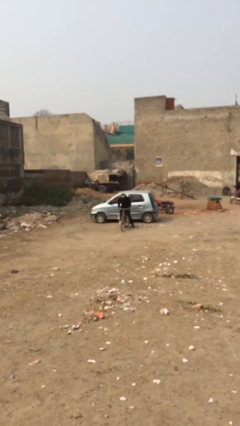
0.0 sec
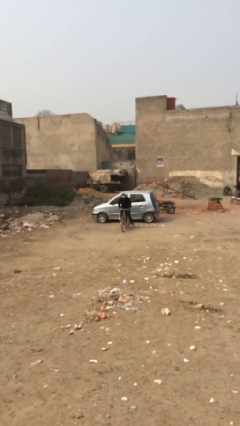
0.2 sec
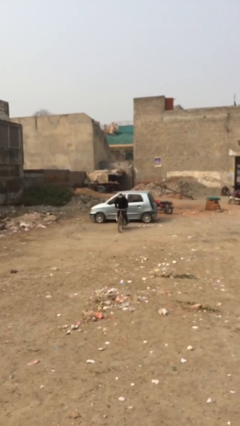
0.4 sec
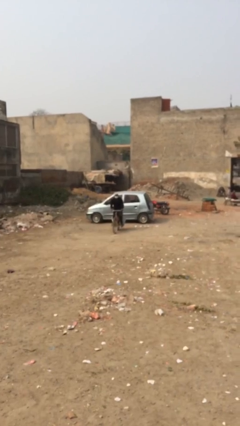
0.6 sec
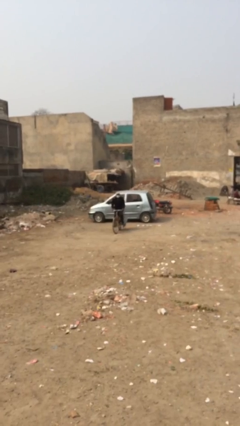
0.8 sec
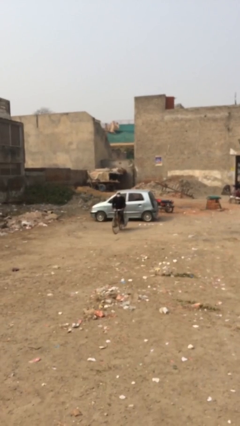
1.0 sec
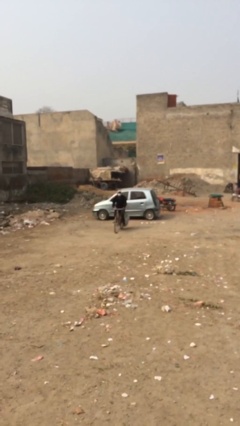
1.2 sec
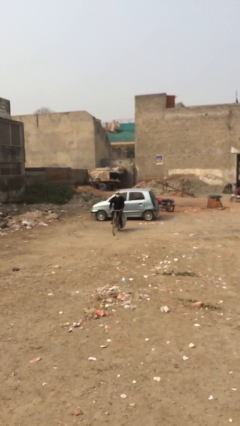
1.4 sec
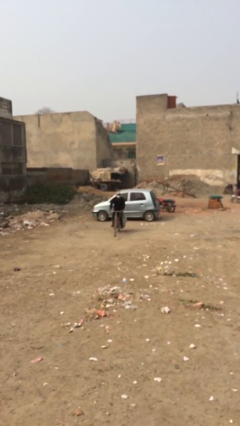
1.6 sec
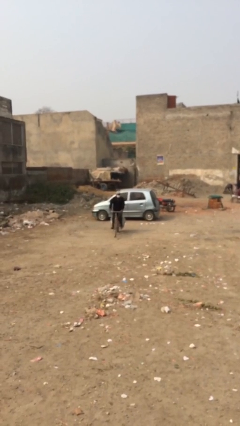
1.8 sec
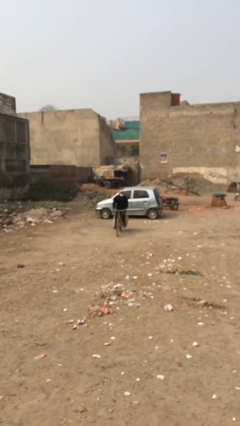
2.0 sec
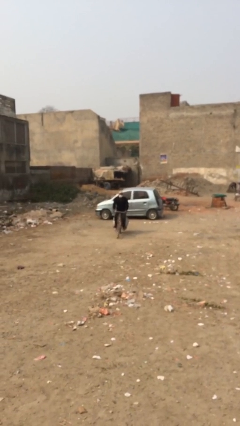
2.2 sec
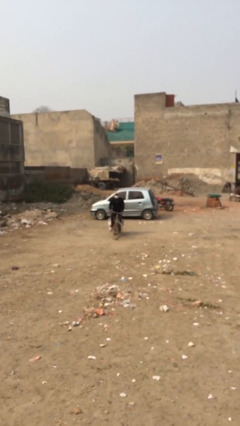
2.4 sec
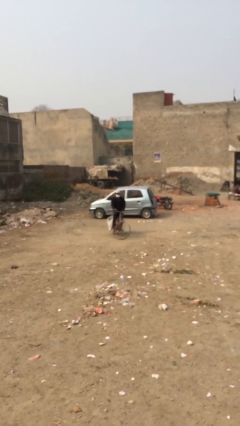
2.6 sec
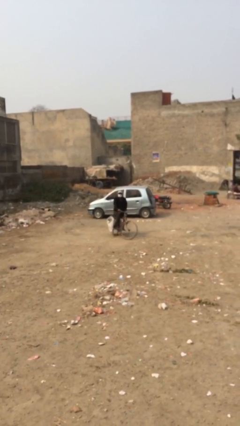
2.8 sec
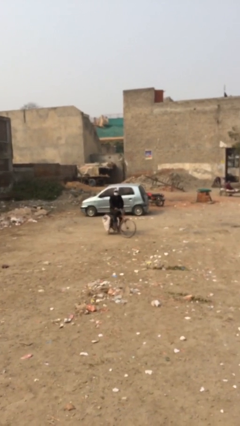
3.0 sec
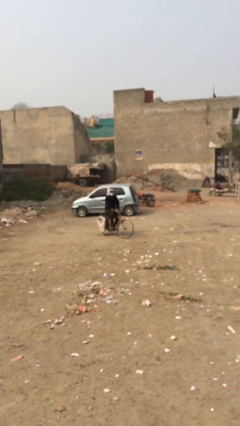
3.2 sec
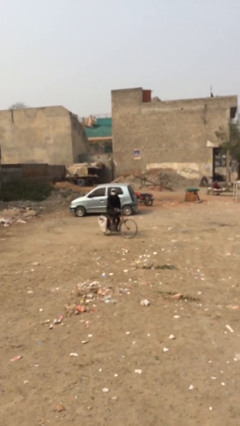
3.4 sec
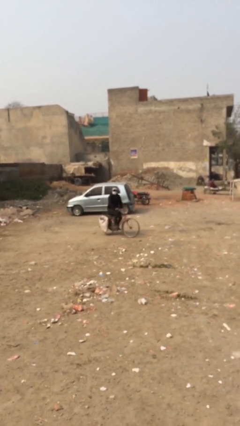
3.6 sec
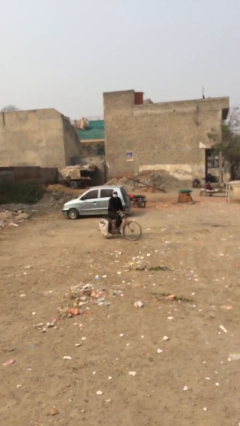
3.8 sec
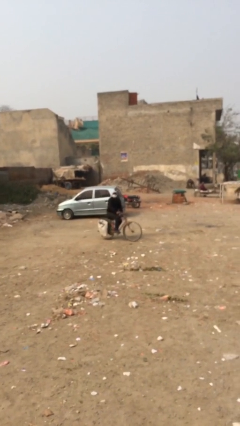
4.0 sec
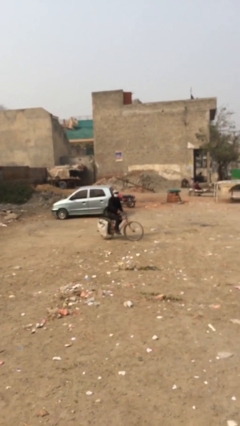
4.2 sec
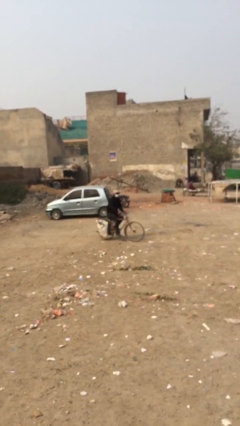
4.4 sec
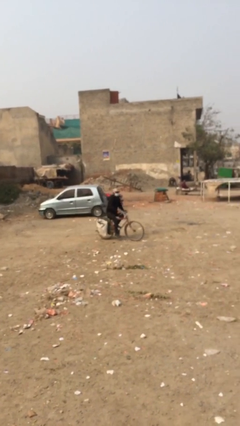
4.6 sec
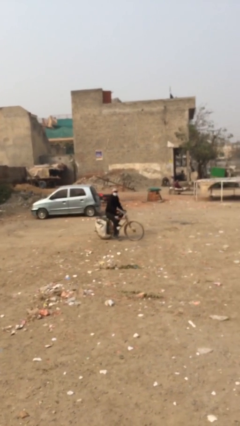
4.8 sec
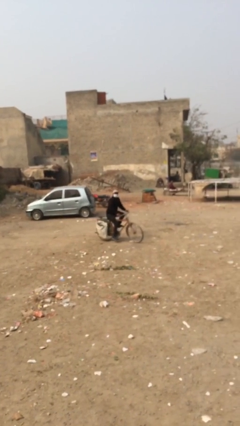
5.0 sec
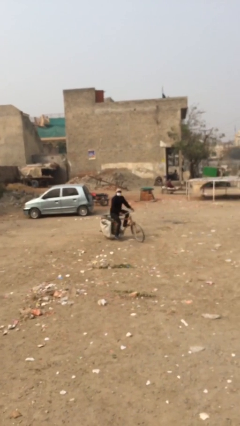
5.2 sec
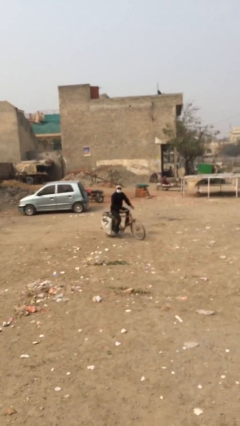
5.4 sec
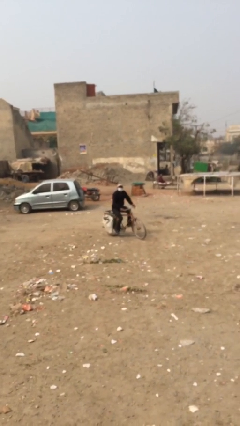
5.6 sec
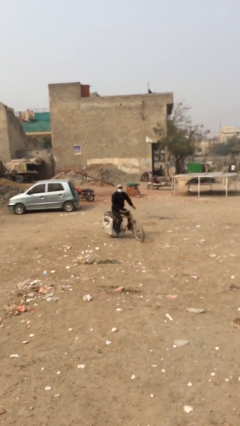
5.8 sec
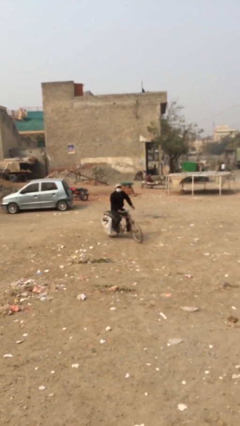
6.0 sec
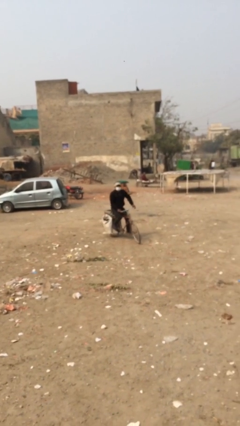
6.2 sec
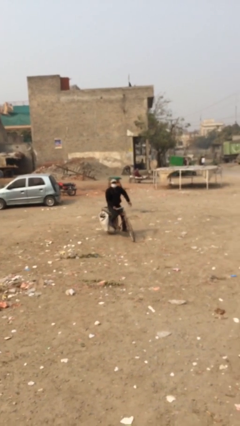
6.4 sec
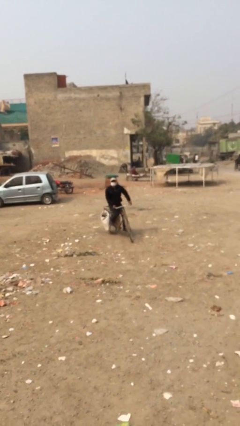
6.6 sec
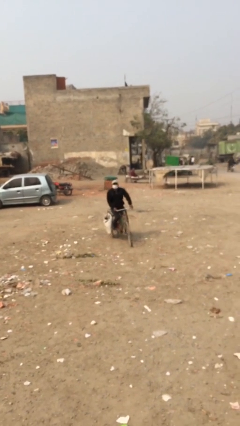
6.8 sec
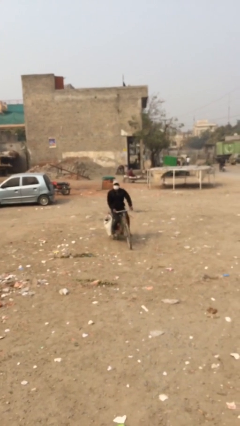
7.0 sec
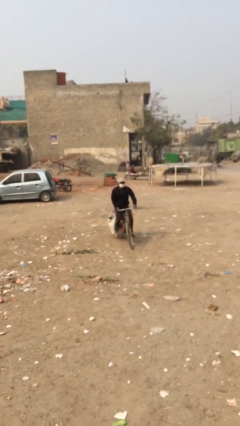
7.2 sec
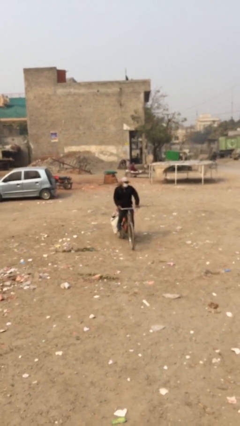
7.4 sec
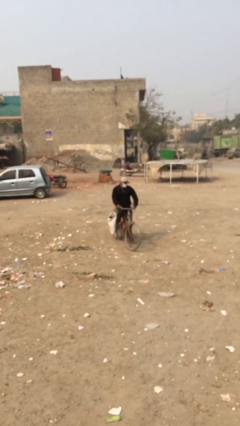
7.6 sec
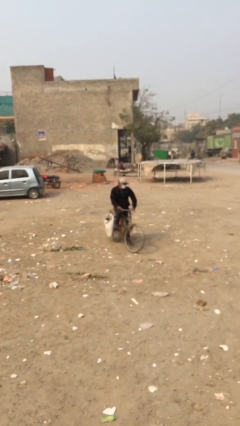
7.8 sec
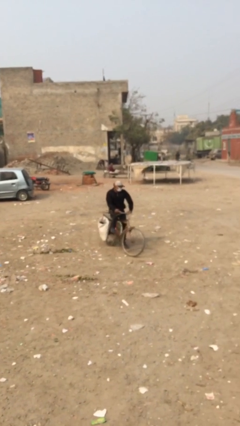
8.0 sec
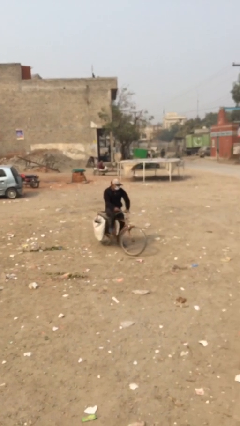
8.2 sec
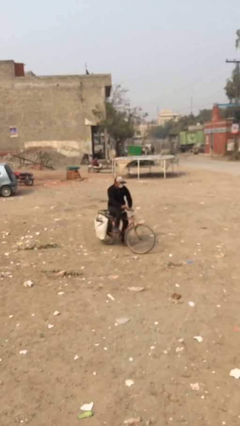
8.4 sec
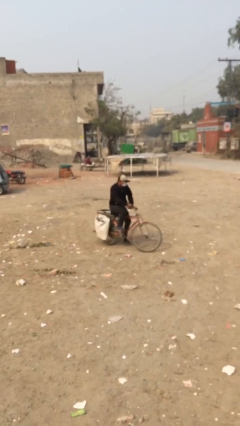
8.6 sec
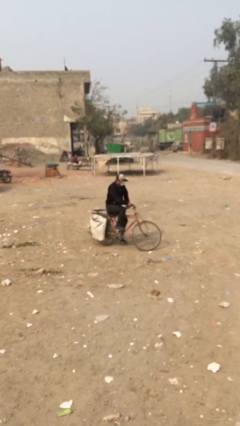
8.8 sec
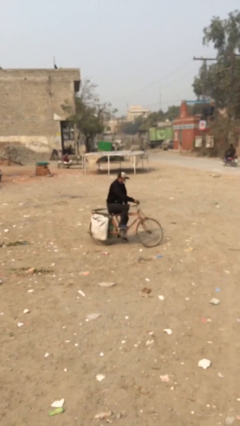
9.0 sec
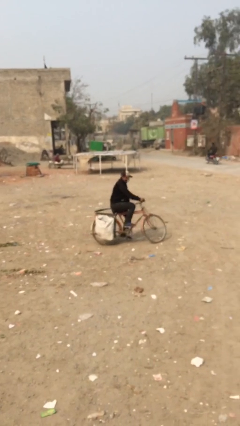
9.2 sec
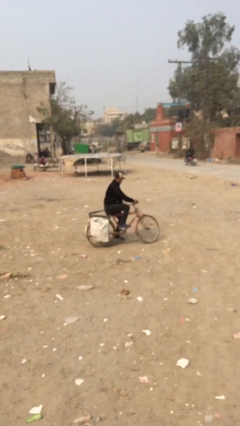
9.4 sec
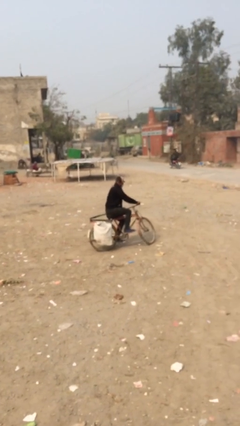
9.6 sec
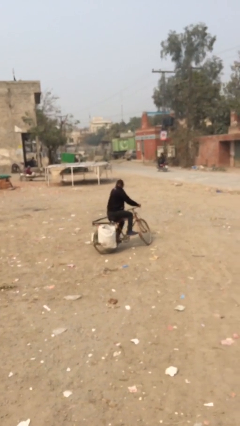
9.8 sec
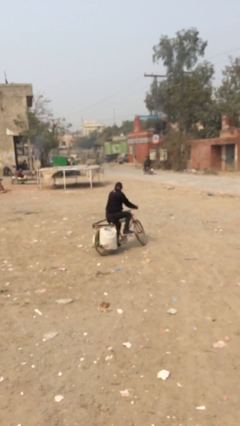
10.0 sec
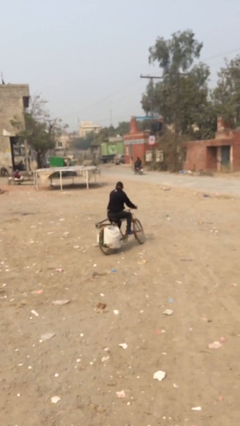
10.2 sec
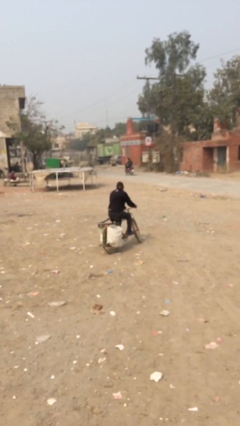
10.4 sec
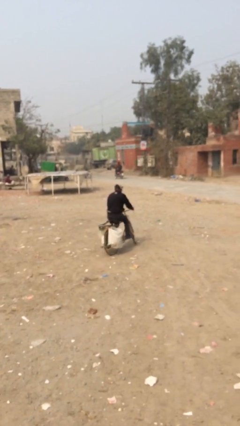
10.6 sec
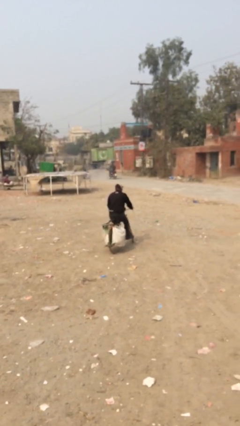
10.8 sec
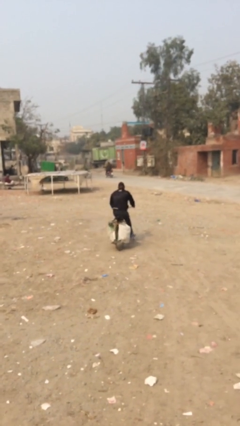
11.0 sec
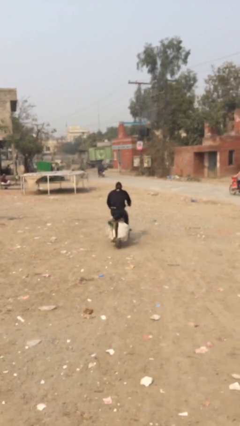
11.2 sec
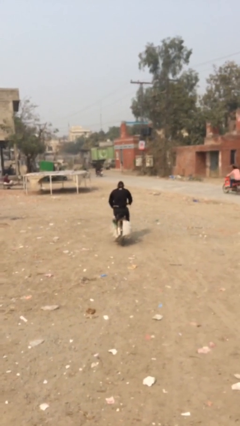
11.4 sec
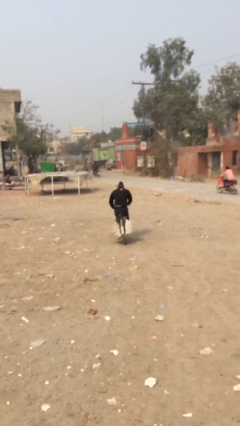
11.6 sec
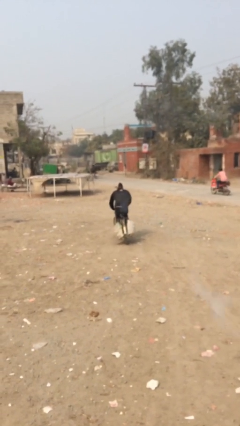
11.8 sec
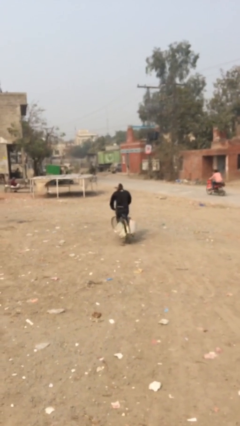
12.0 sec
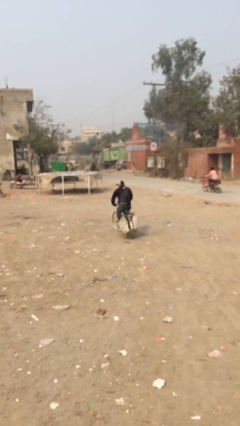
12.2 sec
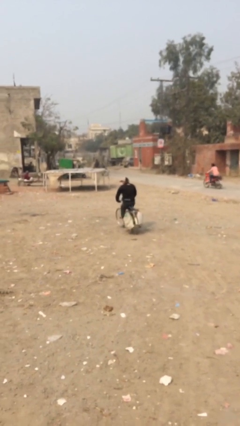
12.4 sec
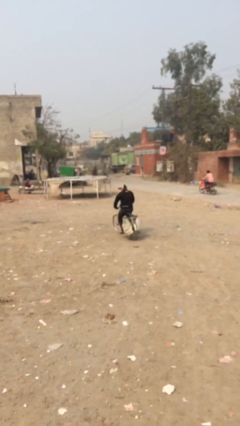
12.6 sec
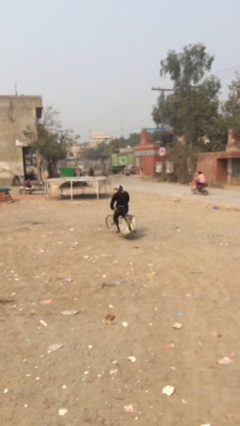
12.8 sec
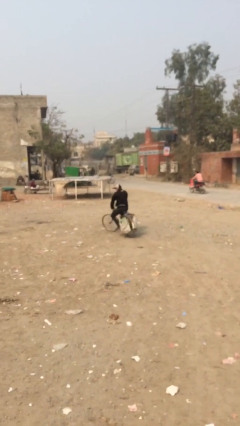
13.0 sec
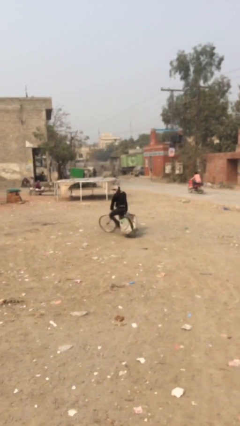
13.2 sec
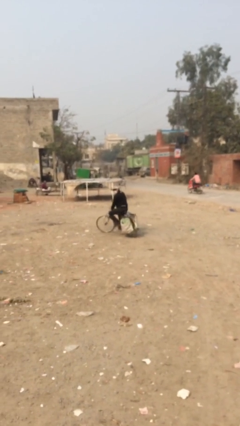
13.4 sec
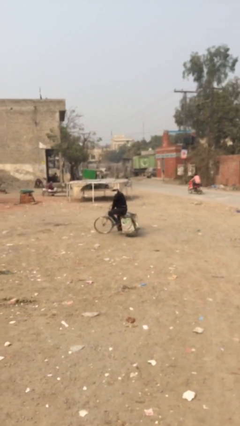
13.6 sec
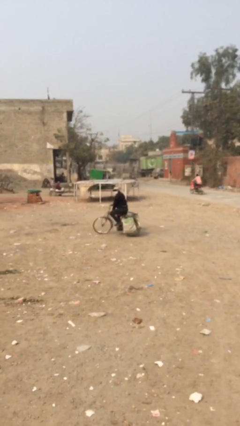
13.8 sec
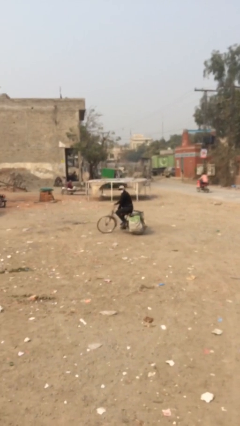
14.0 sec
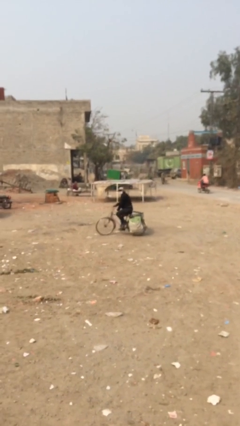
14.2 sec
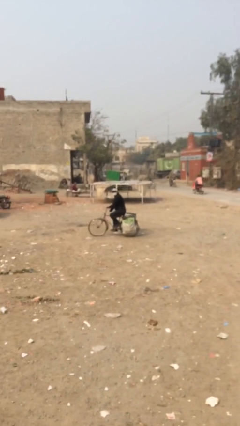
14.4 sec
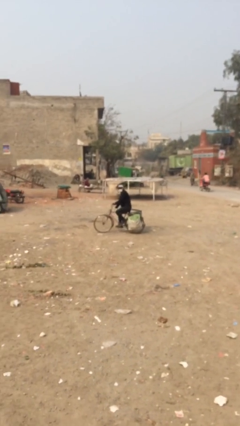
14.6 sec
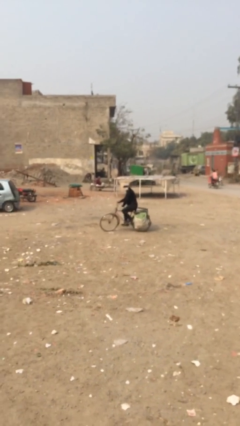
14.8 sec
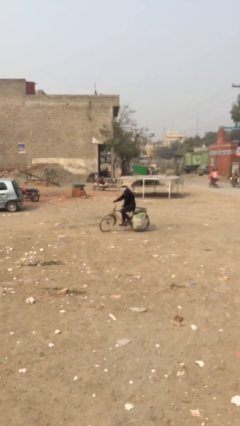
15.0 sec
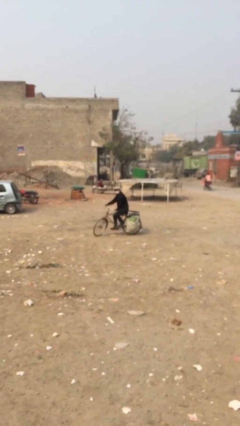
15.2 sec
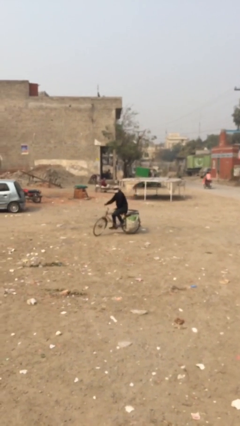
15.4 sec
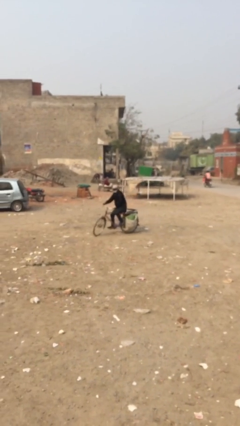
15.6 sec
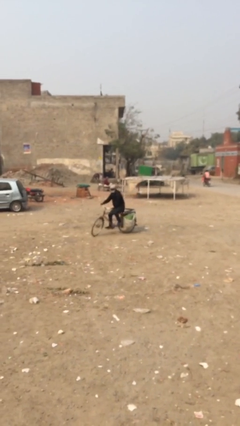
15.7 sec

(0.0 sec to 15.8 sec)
person rides bicycle

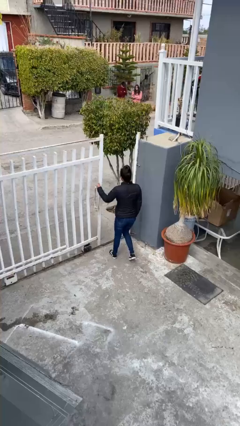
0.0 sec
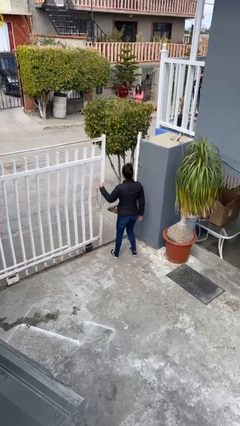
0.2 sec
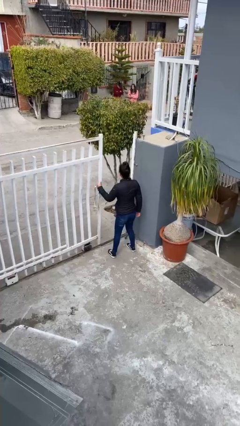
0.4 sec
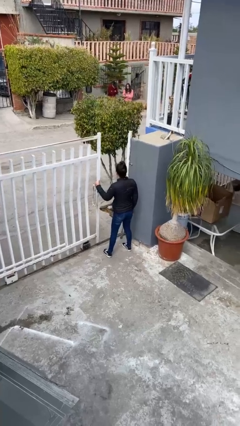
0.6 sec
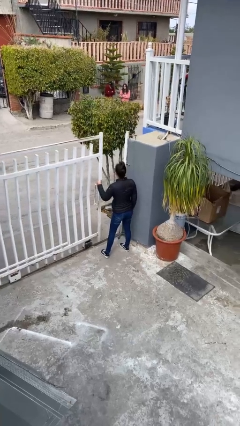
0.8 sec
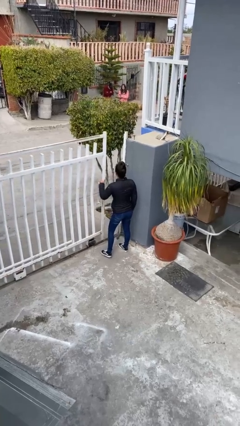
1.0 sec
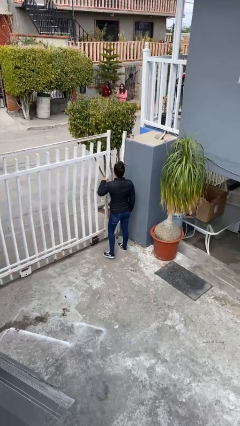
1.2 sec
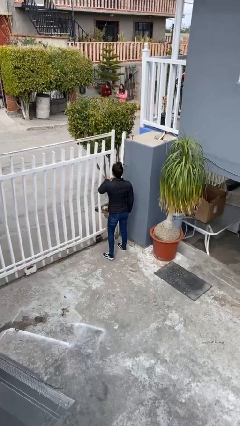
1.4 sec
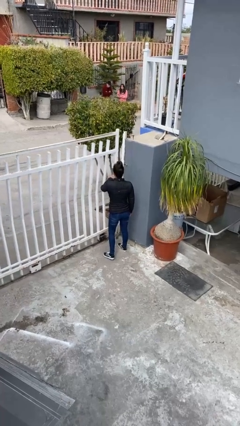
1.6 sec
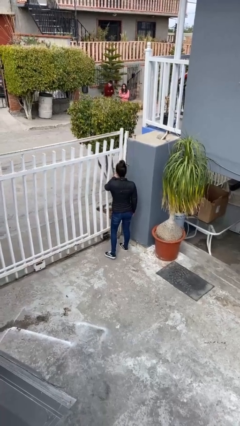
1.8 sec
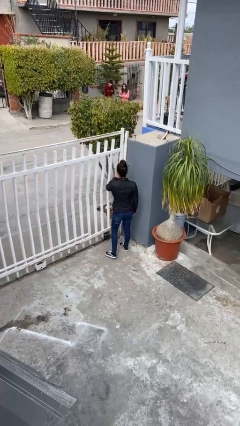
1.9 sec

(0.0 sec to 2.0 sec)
person closes facility door
